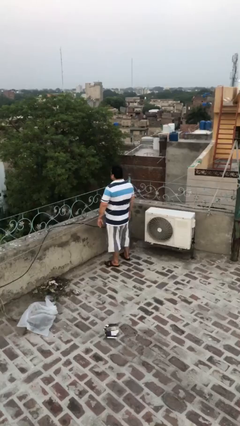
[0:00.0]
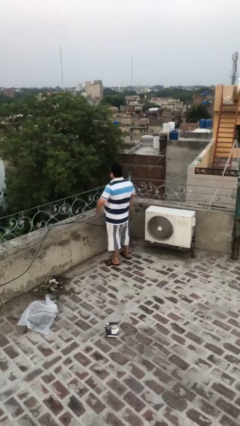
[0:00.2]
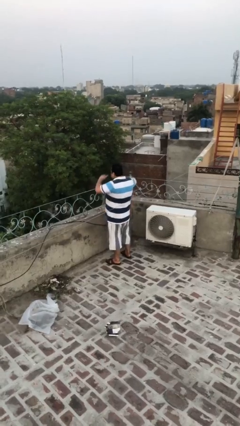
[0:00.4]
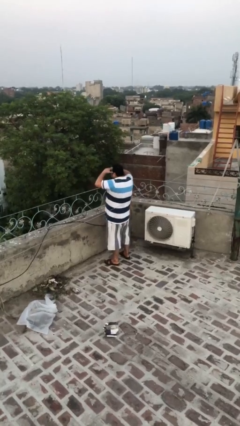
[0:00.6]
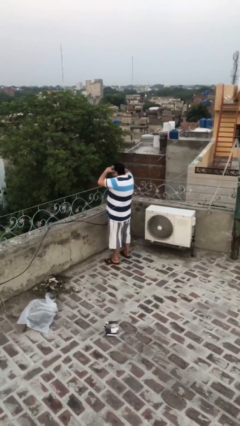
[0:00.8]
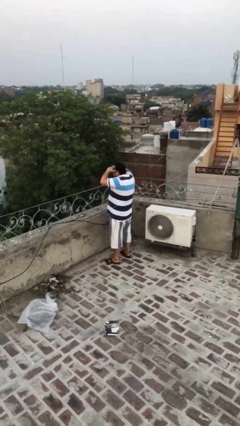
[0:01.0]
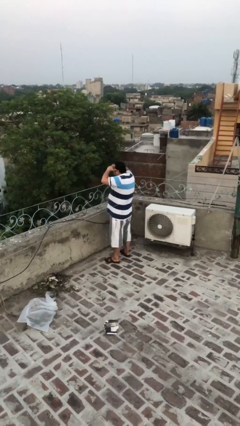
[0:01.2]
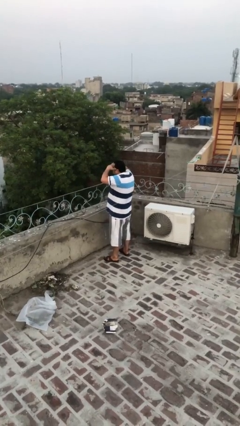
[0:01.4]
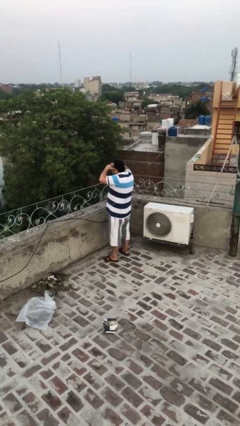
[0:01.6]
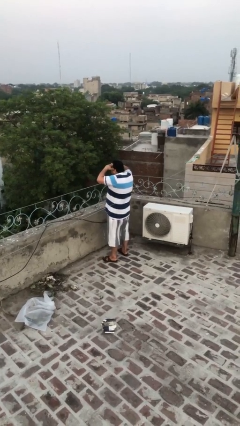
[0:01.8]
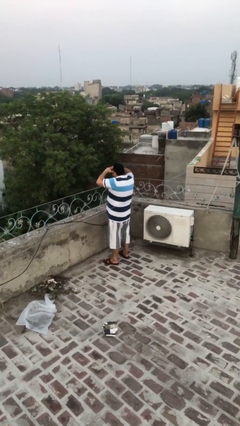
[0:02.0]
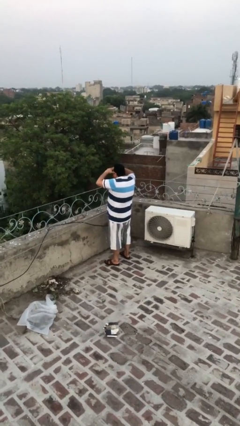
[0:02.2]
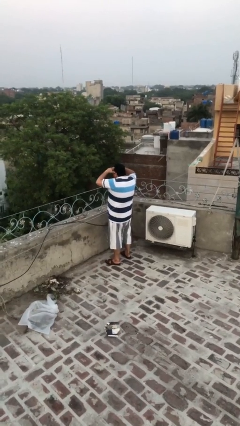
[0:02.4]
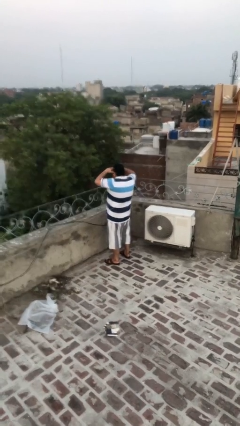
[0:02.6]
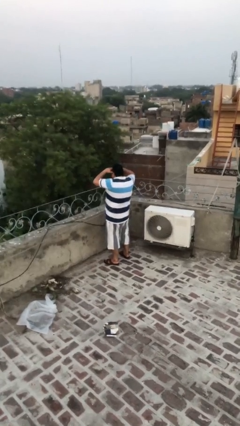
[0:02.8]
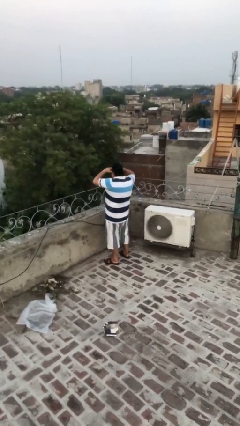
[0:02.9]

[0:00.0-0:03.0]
person shades eyes

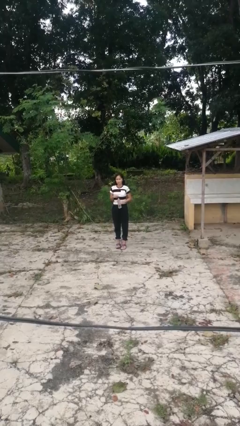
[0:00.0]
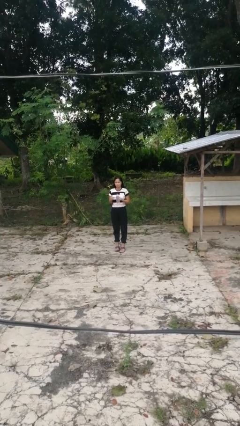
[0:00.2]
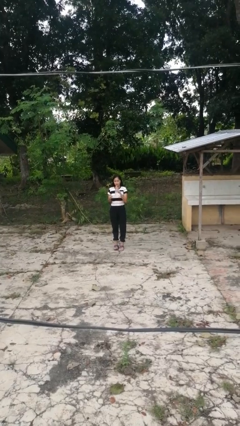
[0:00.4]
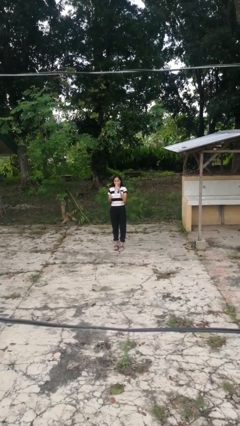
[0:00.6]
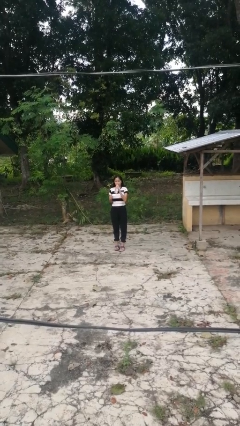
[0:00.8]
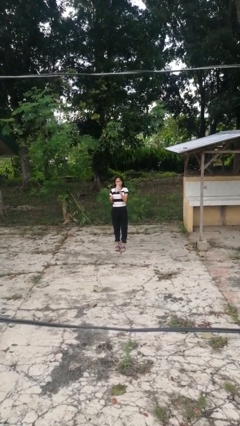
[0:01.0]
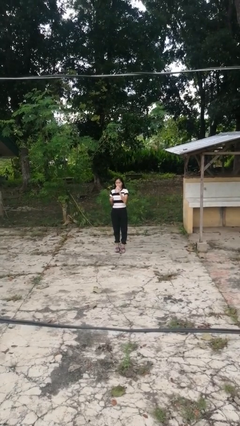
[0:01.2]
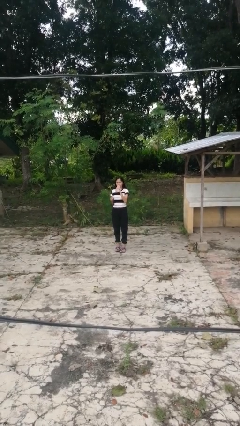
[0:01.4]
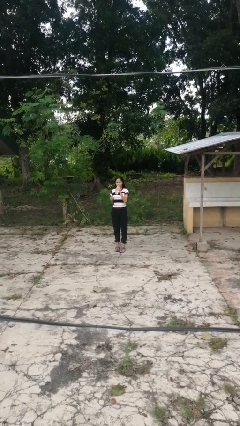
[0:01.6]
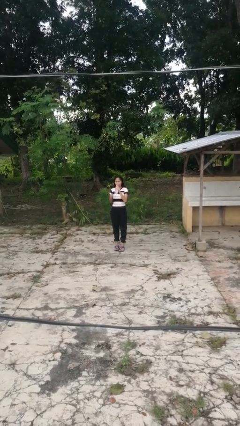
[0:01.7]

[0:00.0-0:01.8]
person drinks from bottle

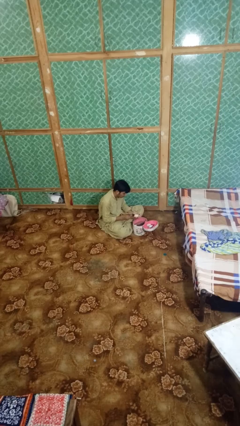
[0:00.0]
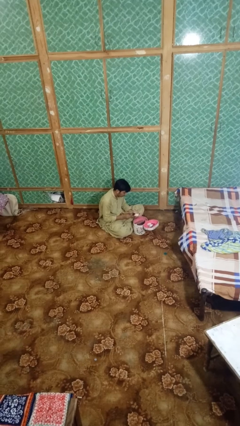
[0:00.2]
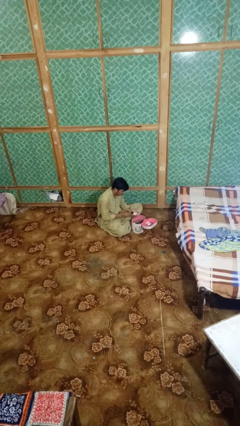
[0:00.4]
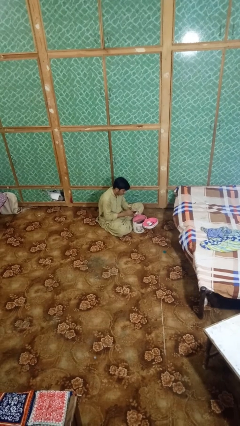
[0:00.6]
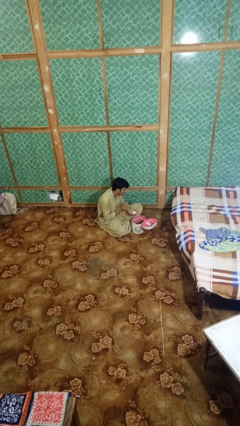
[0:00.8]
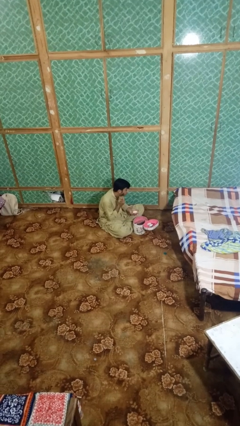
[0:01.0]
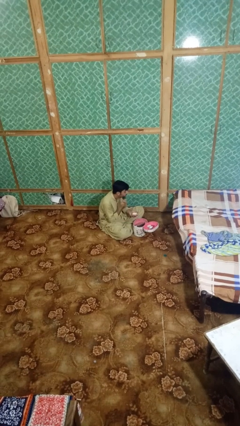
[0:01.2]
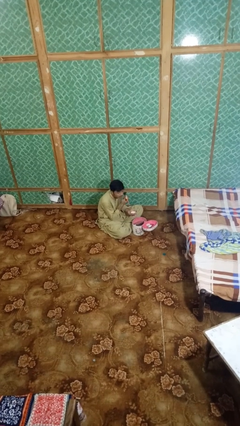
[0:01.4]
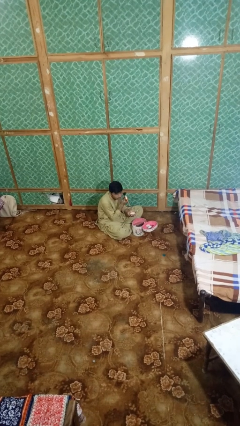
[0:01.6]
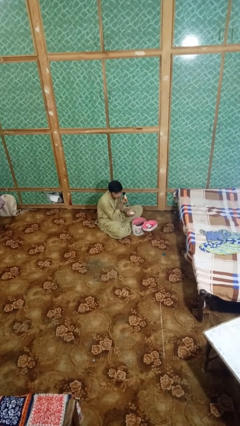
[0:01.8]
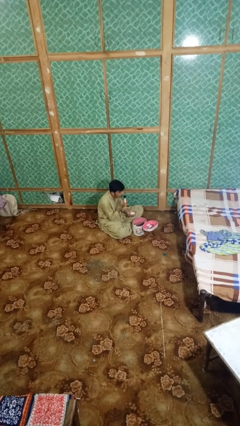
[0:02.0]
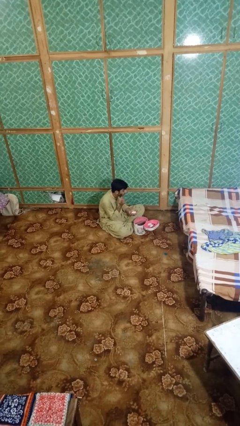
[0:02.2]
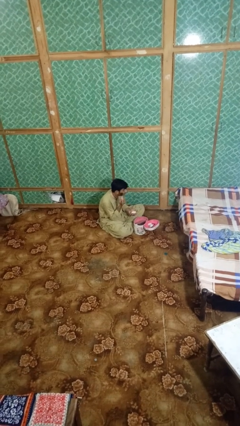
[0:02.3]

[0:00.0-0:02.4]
person applies foundation makeup

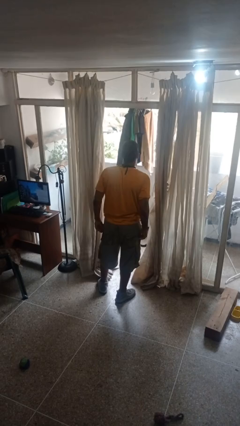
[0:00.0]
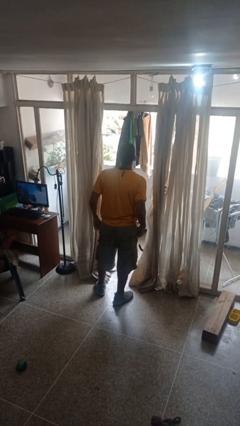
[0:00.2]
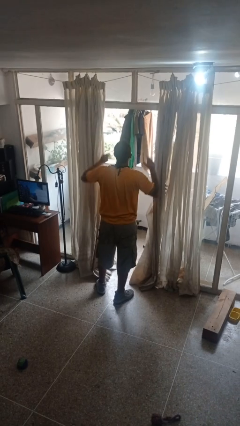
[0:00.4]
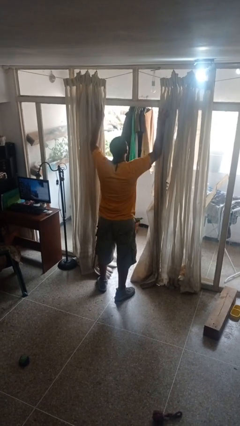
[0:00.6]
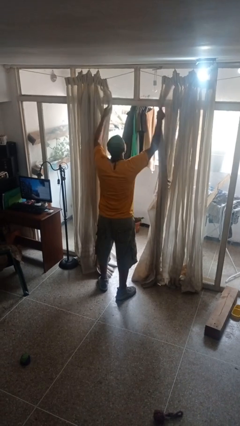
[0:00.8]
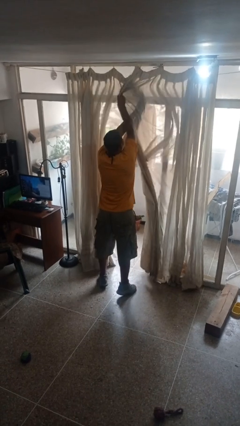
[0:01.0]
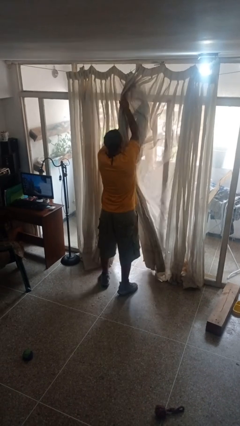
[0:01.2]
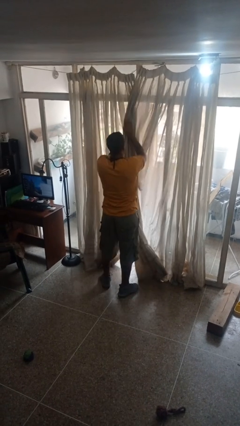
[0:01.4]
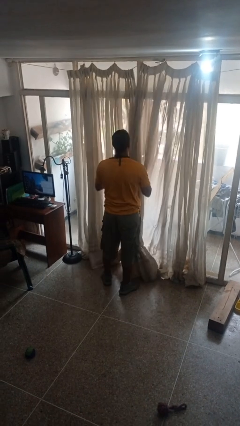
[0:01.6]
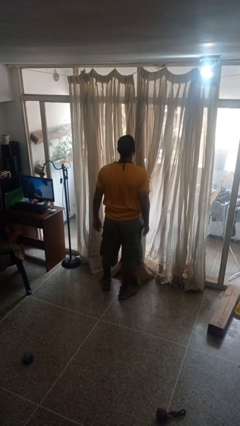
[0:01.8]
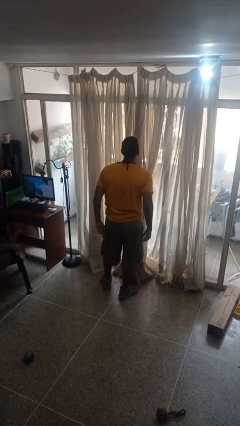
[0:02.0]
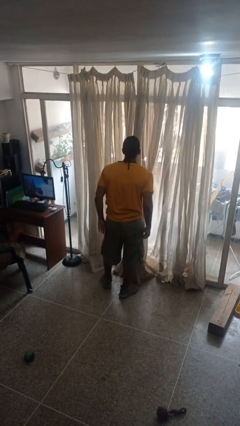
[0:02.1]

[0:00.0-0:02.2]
person closes curtains

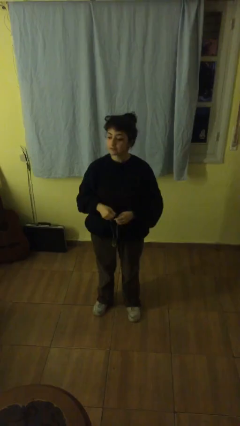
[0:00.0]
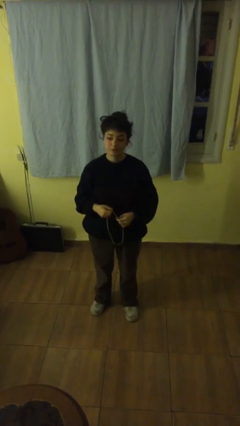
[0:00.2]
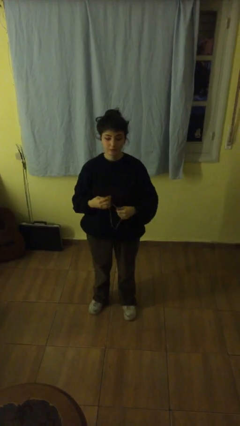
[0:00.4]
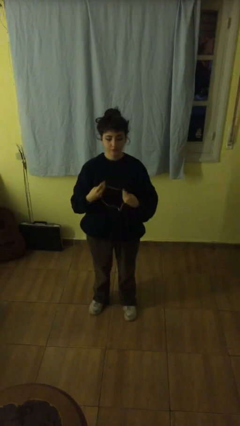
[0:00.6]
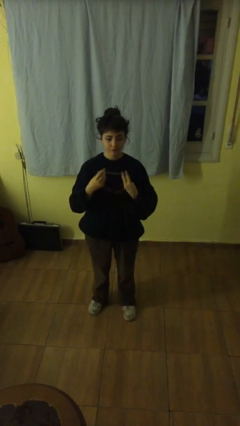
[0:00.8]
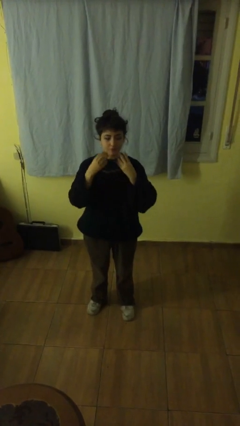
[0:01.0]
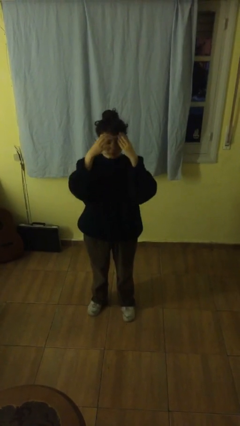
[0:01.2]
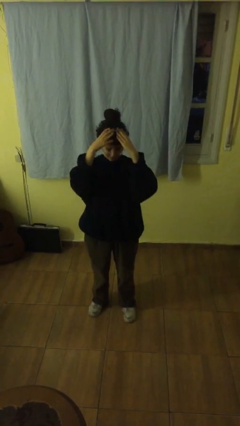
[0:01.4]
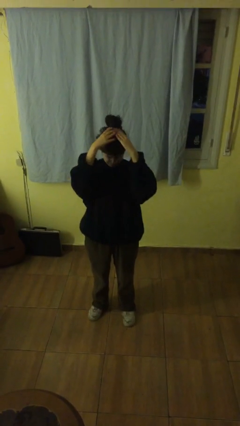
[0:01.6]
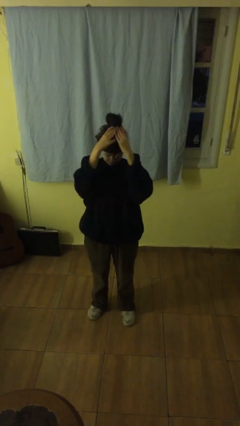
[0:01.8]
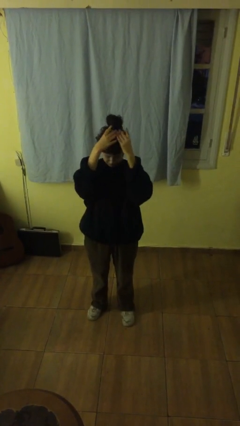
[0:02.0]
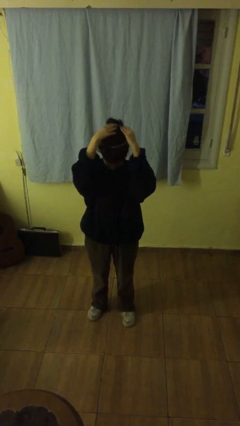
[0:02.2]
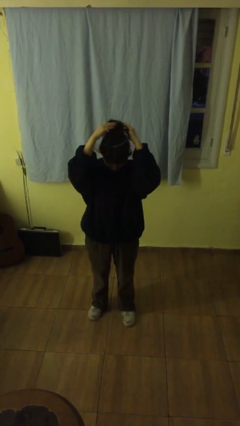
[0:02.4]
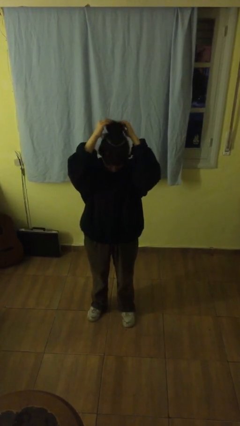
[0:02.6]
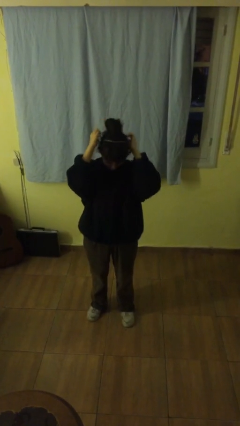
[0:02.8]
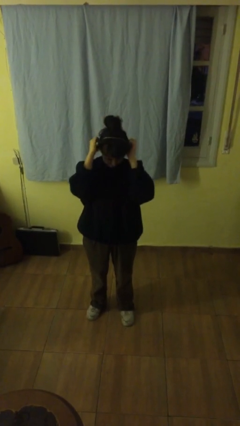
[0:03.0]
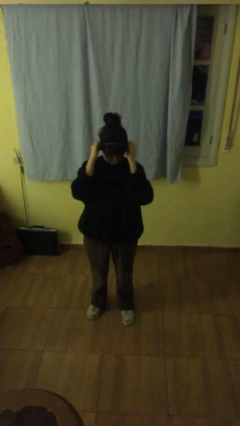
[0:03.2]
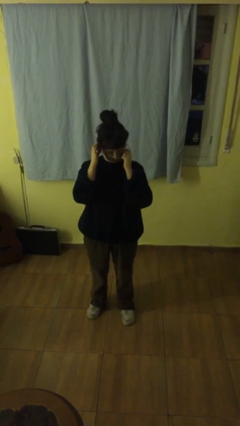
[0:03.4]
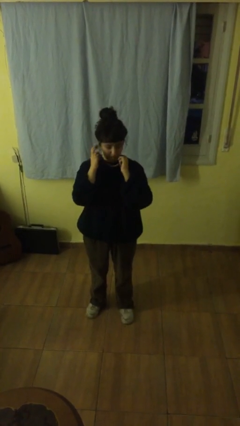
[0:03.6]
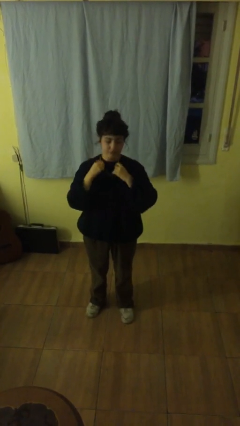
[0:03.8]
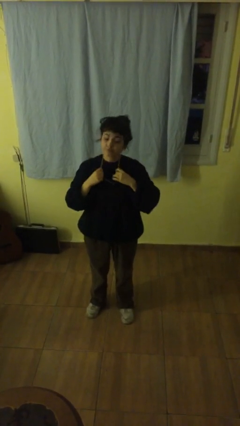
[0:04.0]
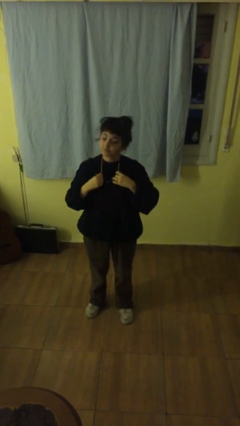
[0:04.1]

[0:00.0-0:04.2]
person puts on necklace

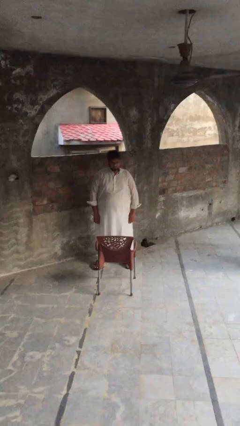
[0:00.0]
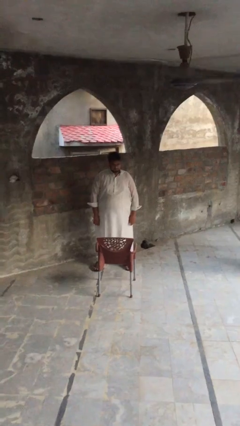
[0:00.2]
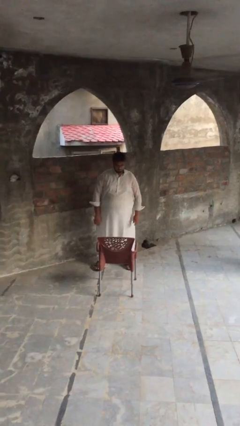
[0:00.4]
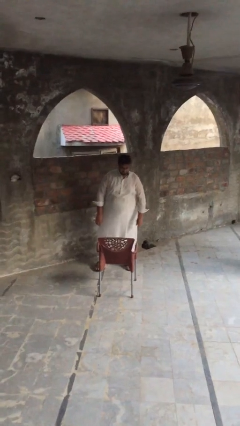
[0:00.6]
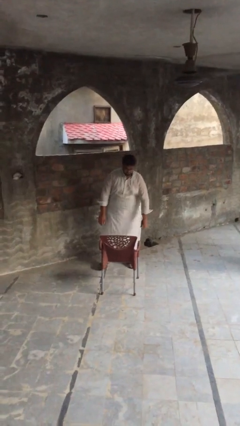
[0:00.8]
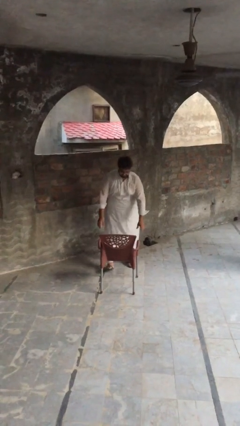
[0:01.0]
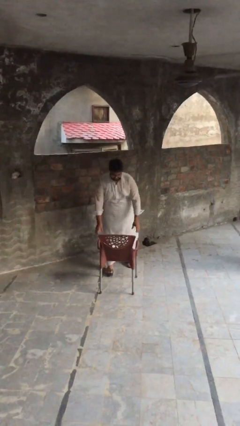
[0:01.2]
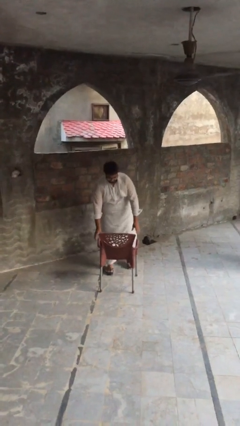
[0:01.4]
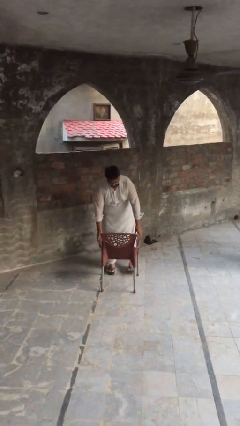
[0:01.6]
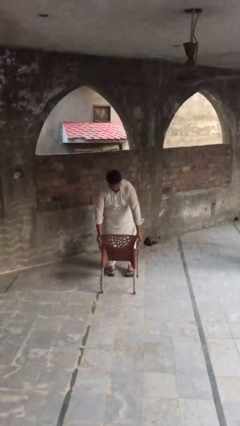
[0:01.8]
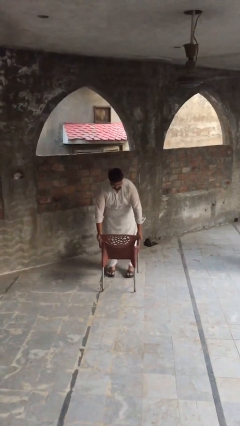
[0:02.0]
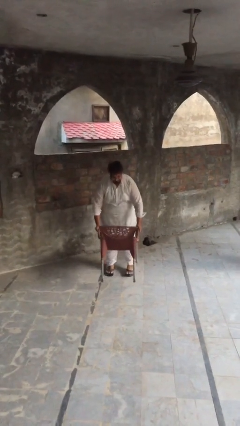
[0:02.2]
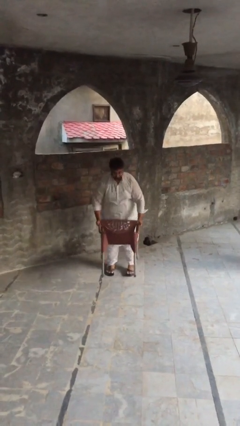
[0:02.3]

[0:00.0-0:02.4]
person picks up object from floor

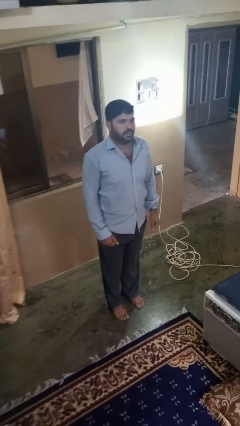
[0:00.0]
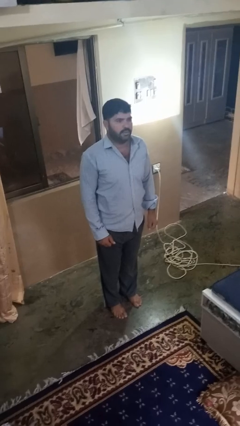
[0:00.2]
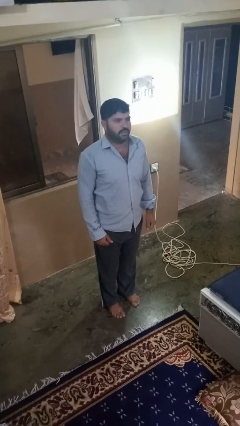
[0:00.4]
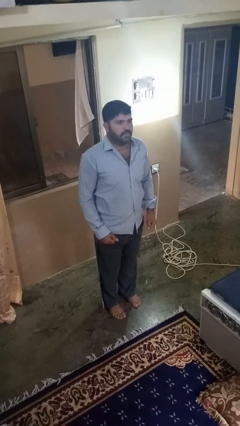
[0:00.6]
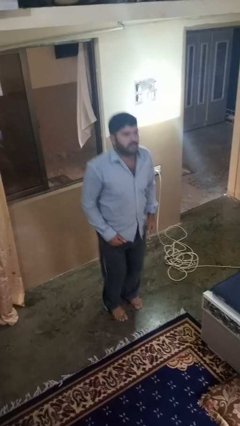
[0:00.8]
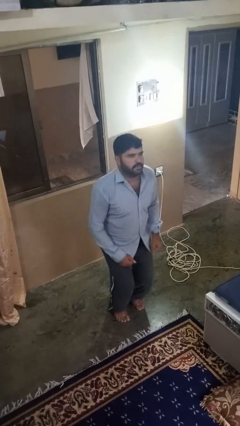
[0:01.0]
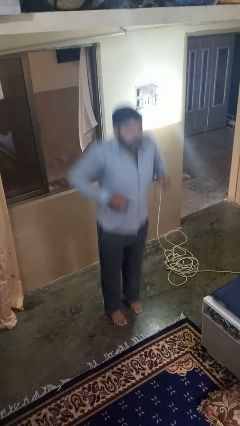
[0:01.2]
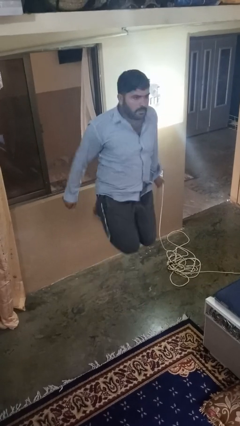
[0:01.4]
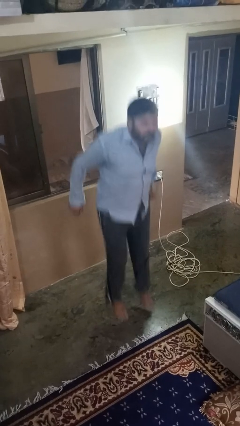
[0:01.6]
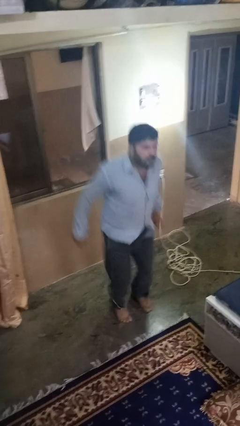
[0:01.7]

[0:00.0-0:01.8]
person jumps
